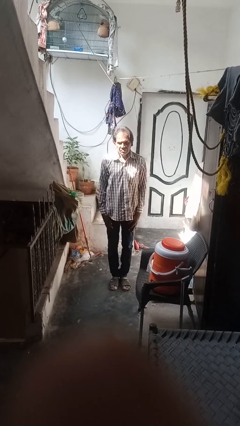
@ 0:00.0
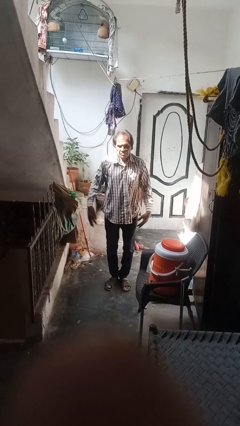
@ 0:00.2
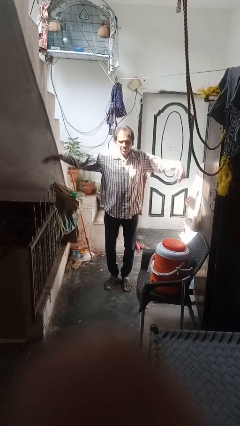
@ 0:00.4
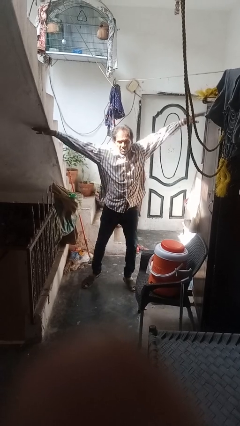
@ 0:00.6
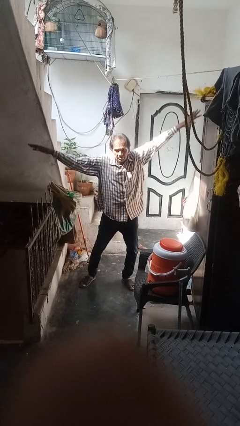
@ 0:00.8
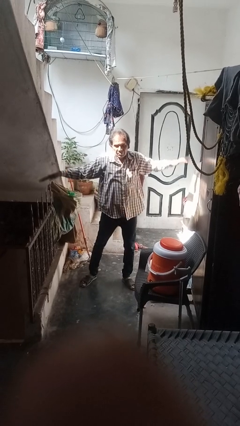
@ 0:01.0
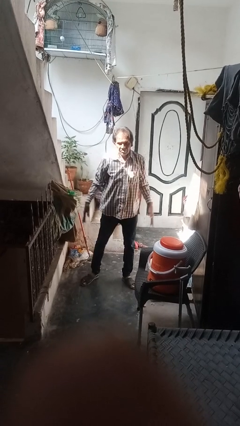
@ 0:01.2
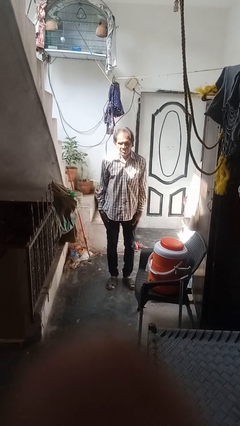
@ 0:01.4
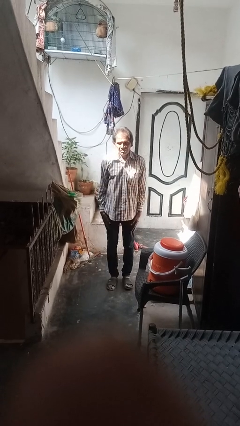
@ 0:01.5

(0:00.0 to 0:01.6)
person exercises with jumping jacks

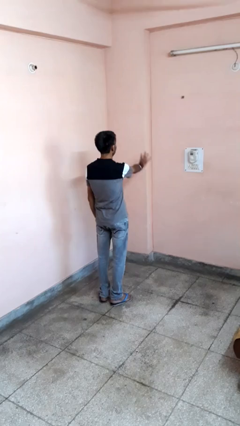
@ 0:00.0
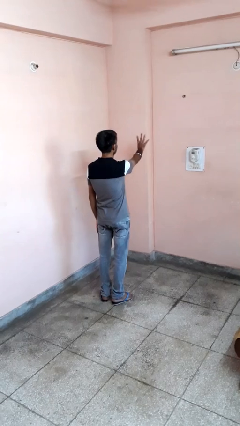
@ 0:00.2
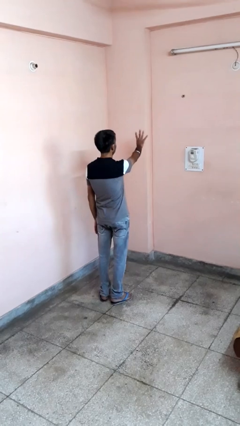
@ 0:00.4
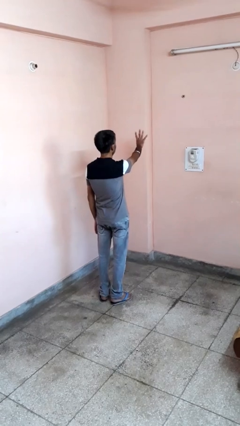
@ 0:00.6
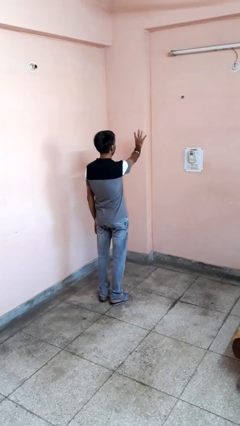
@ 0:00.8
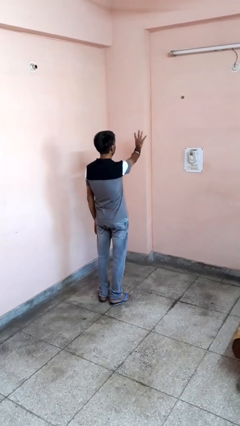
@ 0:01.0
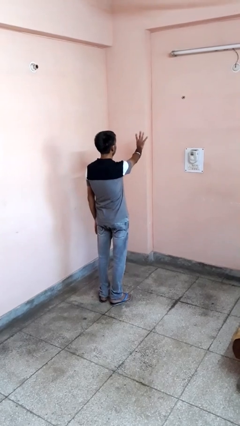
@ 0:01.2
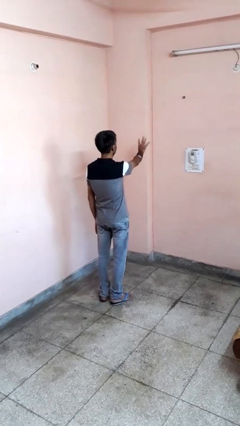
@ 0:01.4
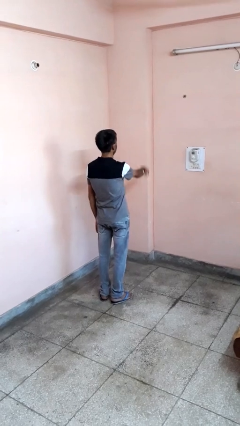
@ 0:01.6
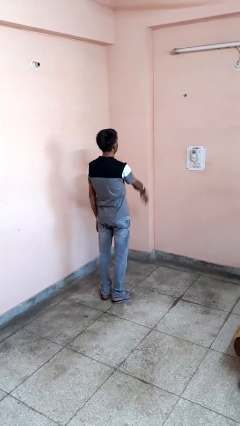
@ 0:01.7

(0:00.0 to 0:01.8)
person gestures number four

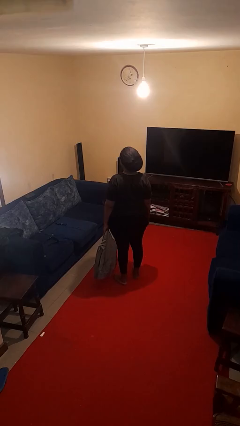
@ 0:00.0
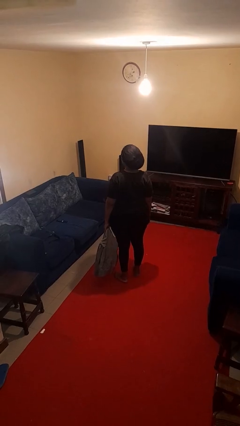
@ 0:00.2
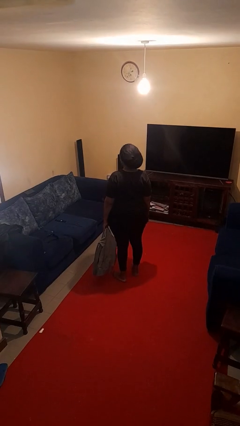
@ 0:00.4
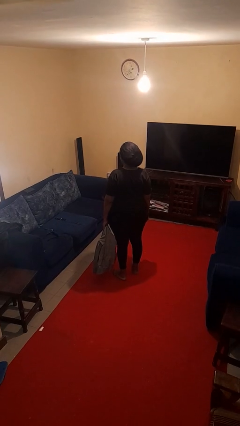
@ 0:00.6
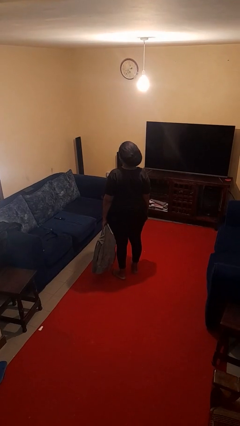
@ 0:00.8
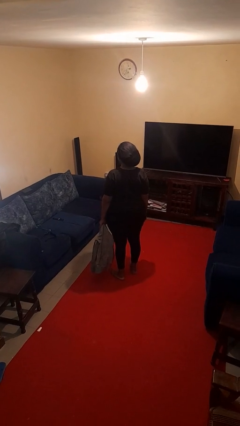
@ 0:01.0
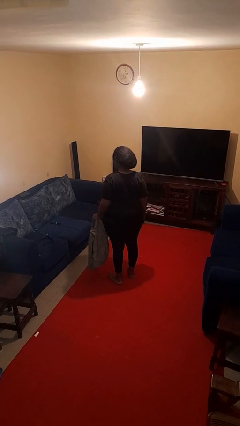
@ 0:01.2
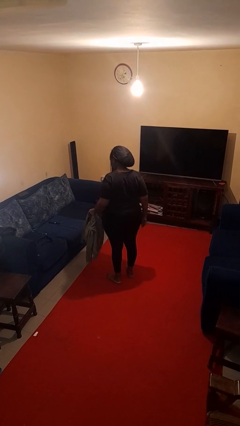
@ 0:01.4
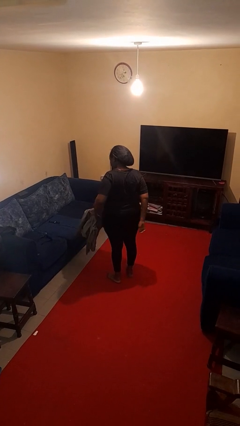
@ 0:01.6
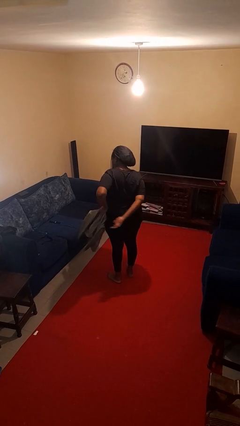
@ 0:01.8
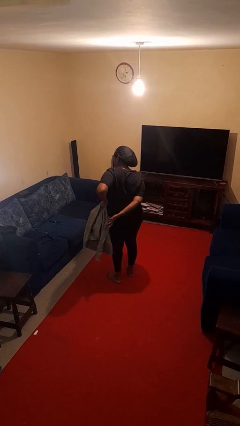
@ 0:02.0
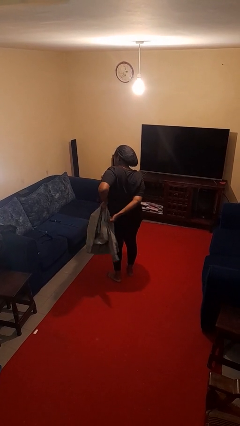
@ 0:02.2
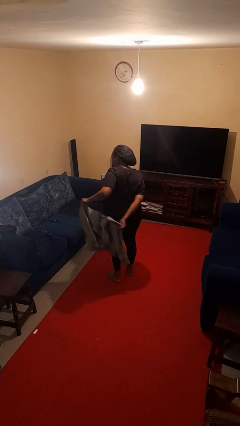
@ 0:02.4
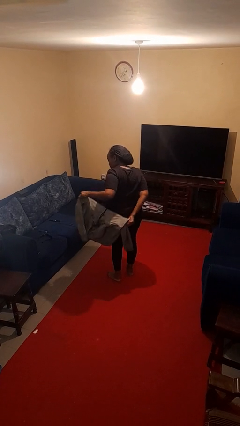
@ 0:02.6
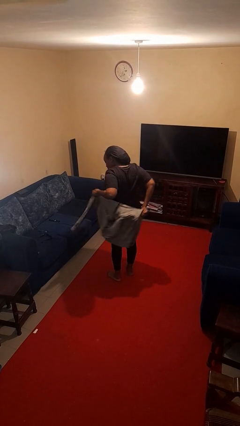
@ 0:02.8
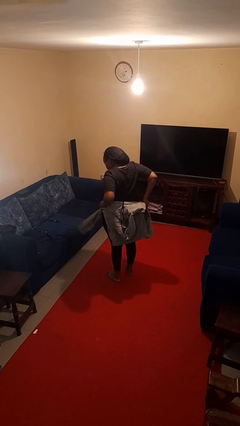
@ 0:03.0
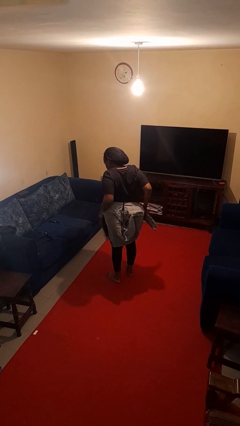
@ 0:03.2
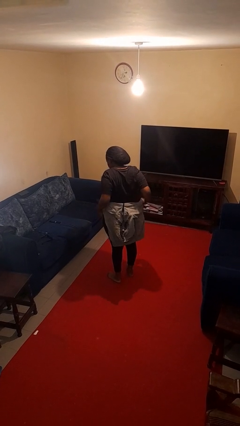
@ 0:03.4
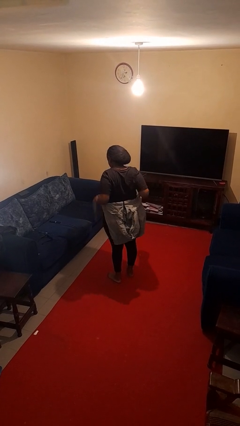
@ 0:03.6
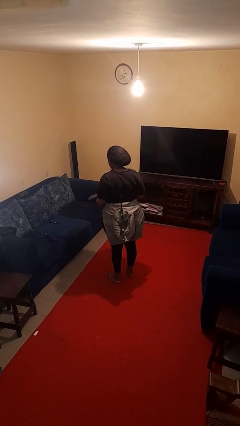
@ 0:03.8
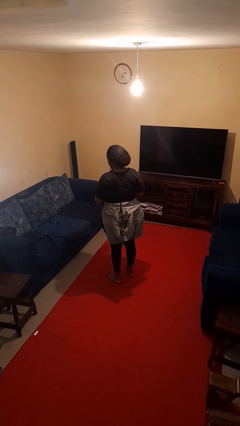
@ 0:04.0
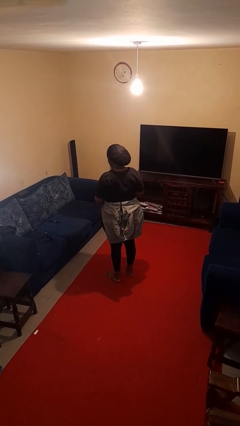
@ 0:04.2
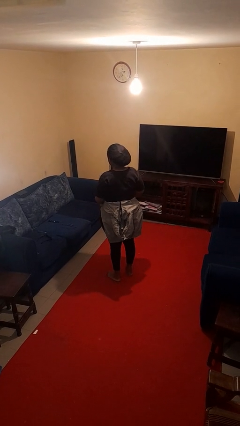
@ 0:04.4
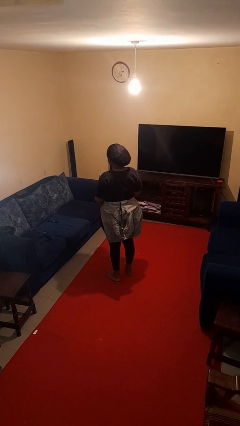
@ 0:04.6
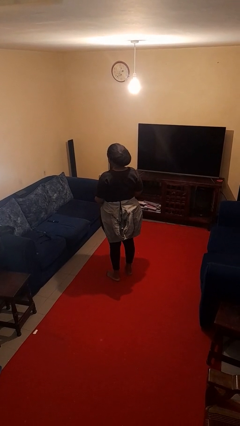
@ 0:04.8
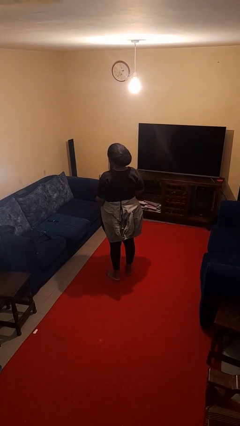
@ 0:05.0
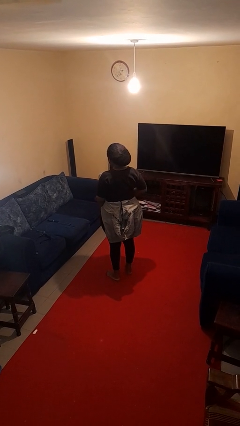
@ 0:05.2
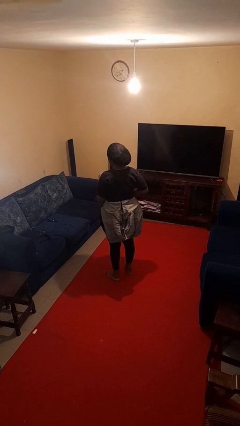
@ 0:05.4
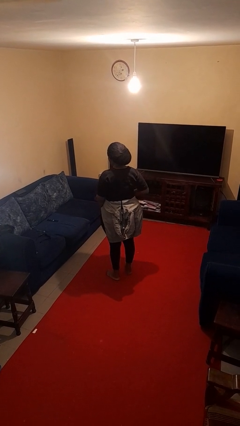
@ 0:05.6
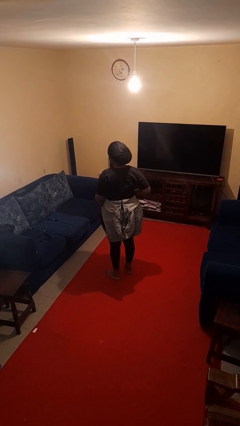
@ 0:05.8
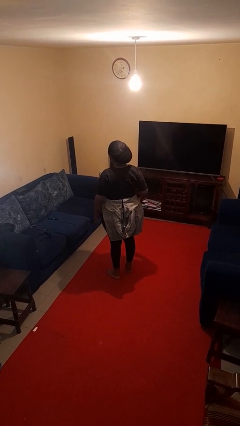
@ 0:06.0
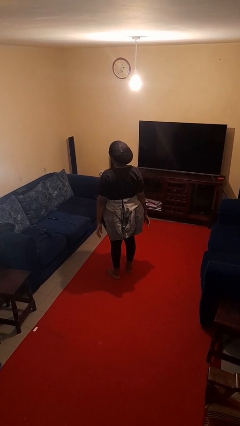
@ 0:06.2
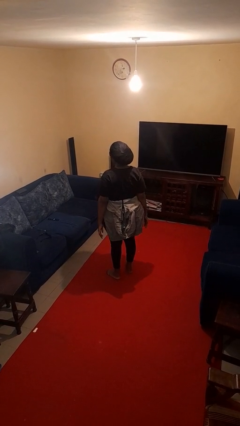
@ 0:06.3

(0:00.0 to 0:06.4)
person ties jacket around waist

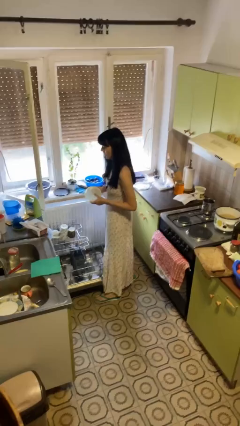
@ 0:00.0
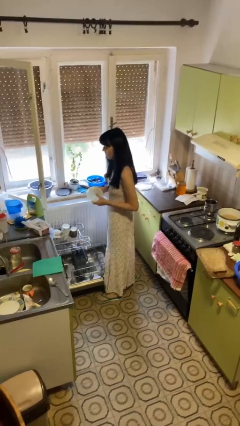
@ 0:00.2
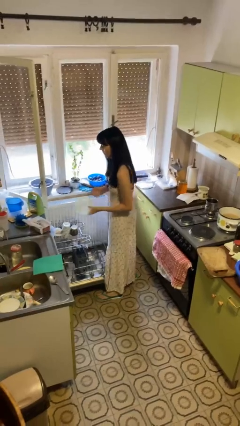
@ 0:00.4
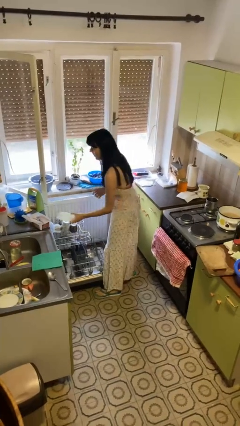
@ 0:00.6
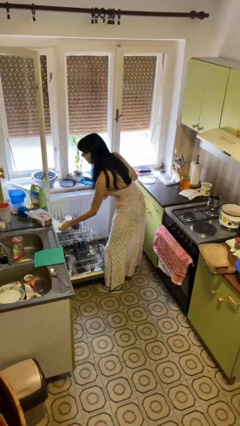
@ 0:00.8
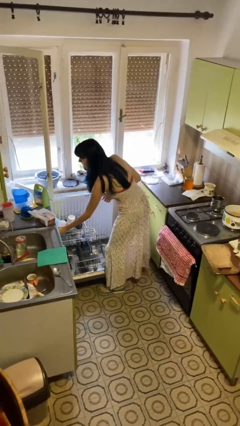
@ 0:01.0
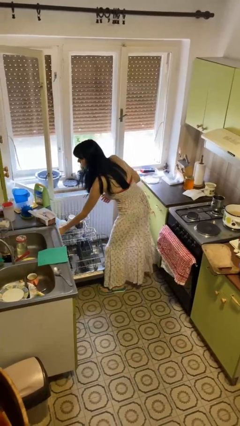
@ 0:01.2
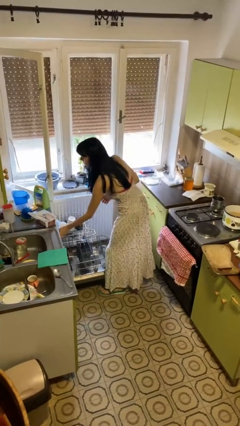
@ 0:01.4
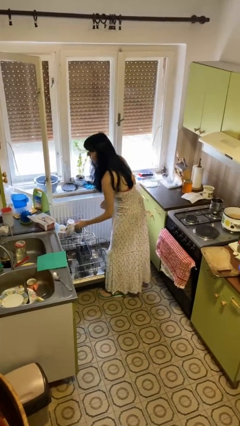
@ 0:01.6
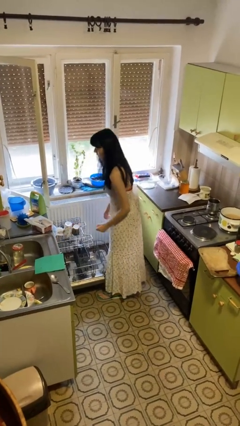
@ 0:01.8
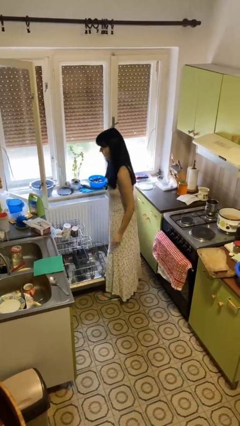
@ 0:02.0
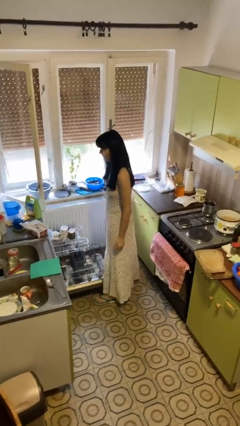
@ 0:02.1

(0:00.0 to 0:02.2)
person loads dishwasher

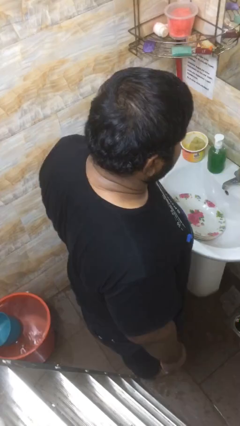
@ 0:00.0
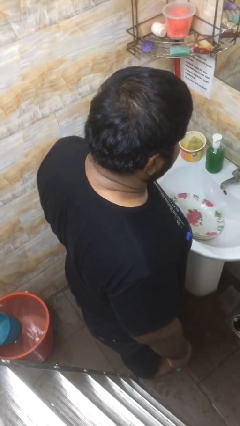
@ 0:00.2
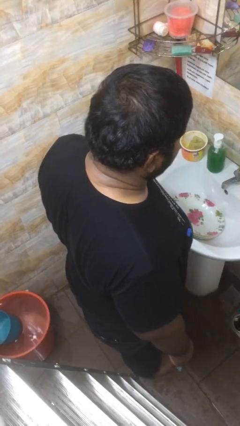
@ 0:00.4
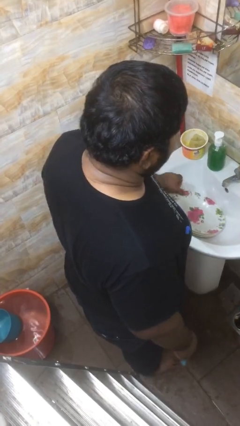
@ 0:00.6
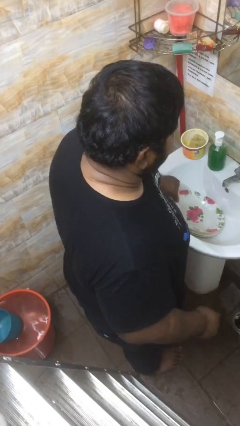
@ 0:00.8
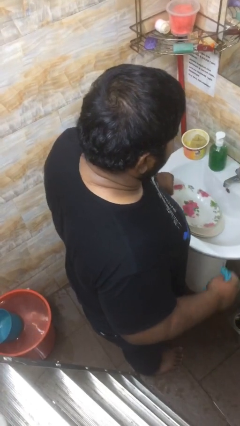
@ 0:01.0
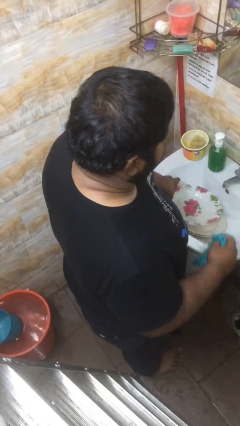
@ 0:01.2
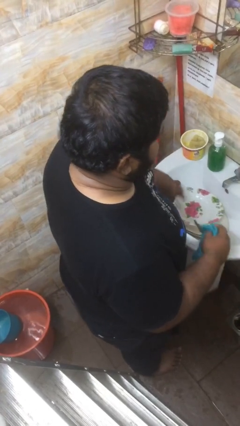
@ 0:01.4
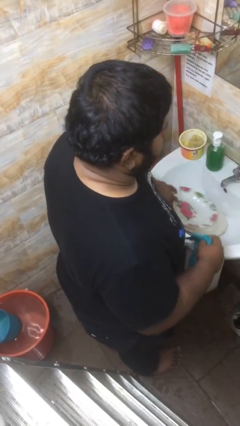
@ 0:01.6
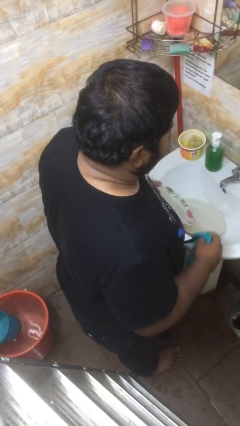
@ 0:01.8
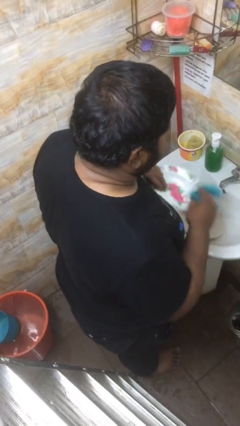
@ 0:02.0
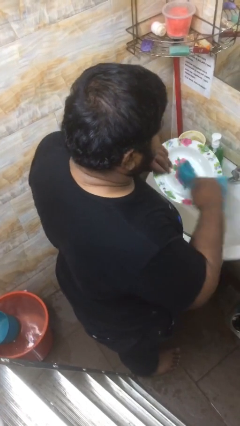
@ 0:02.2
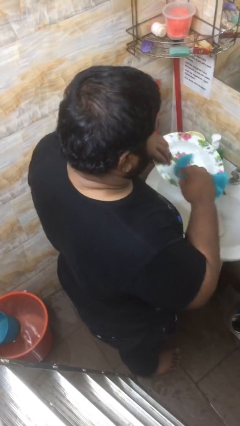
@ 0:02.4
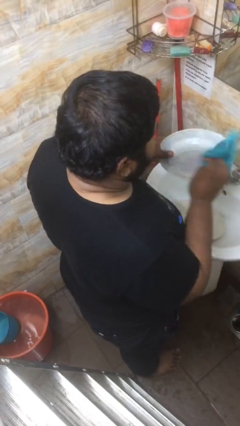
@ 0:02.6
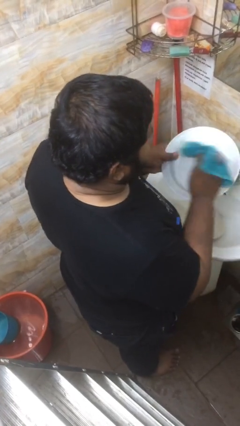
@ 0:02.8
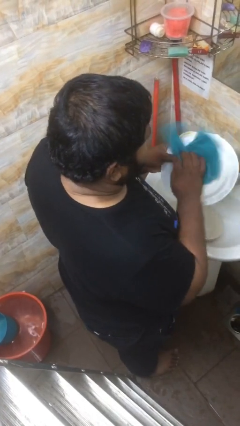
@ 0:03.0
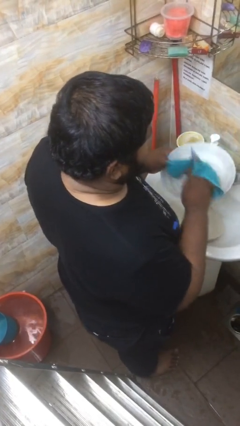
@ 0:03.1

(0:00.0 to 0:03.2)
person dries dish

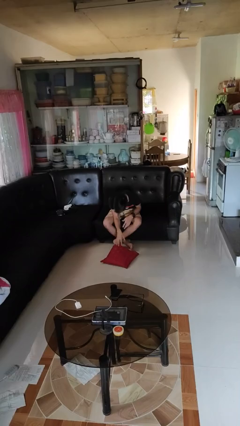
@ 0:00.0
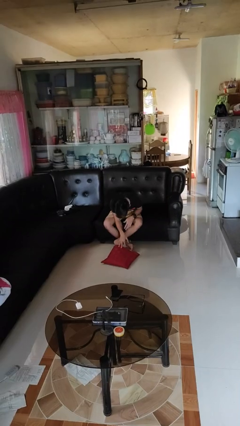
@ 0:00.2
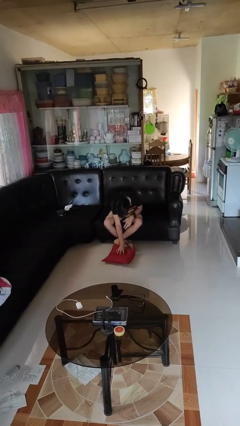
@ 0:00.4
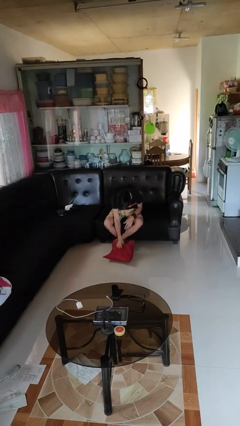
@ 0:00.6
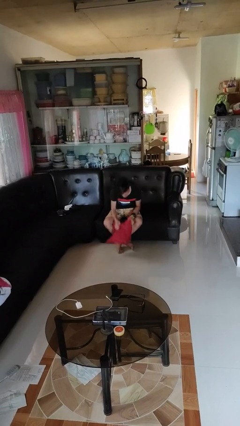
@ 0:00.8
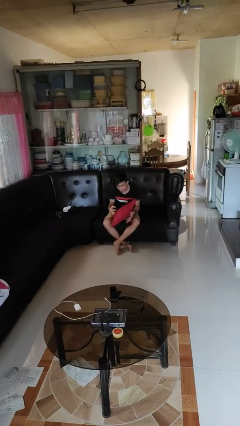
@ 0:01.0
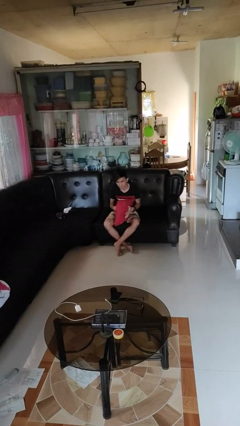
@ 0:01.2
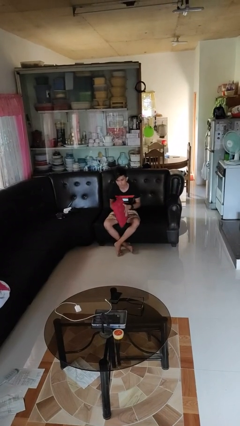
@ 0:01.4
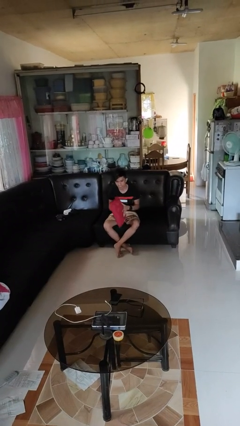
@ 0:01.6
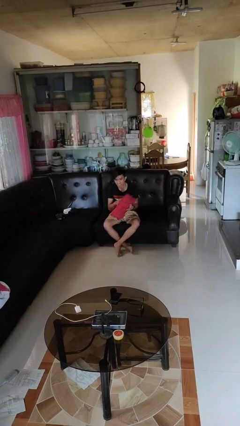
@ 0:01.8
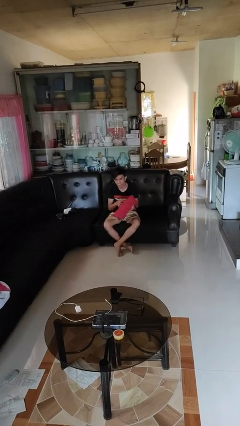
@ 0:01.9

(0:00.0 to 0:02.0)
person picks up object from floor
